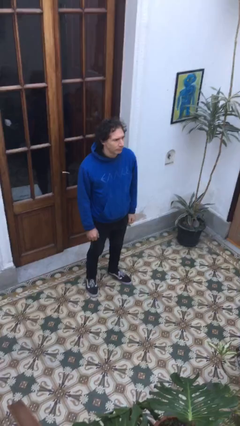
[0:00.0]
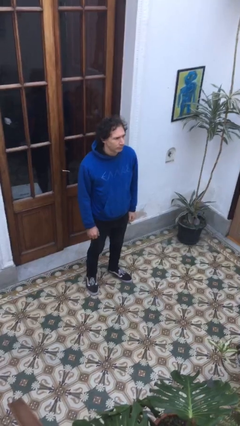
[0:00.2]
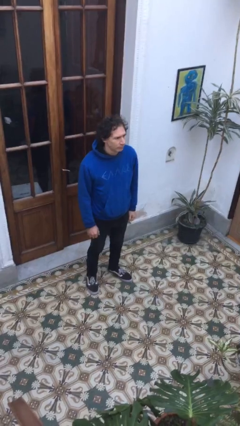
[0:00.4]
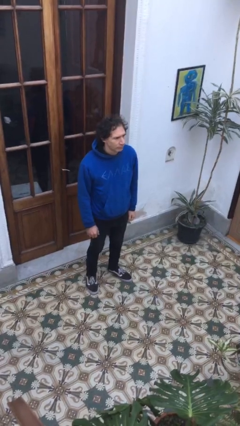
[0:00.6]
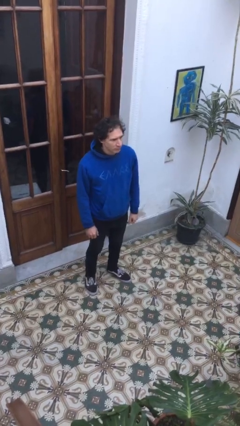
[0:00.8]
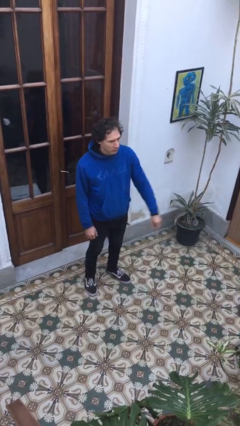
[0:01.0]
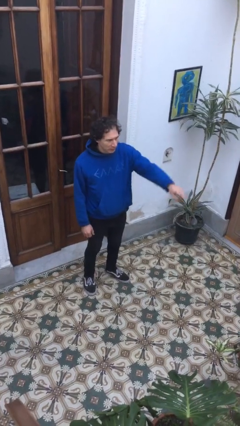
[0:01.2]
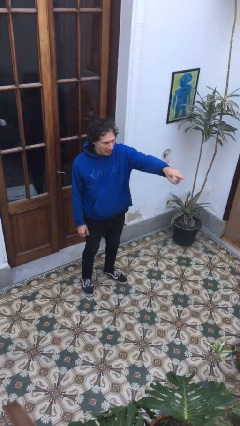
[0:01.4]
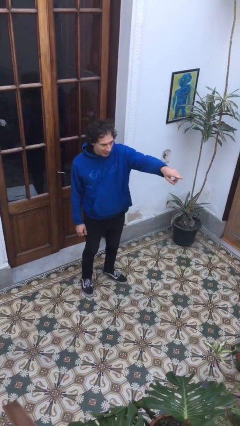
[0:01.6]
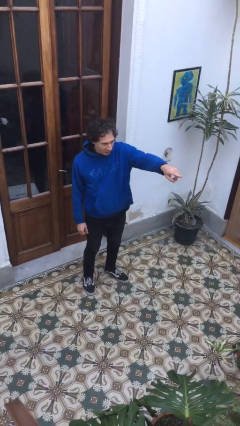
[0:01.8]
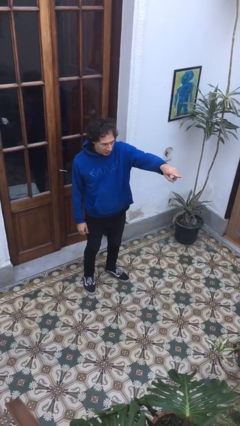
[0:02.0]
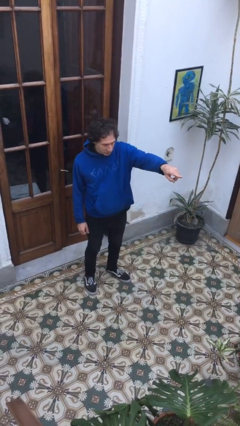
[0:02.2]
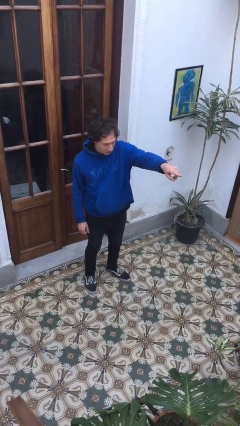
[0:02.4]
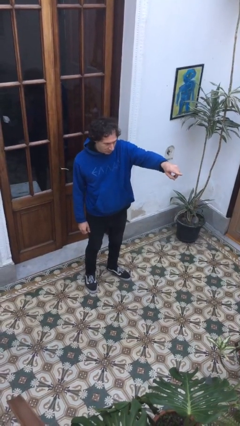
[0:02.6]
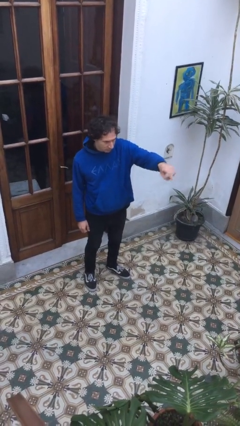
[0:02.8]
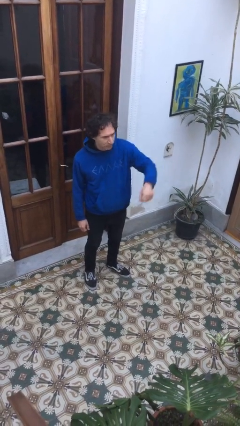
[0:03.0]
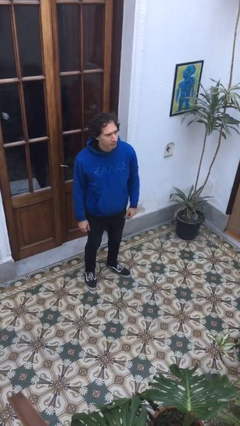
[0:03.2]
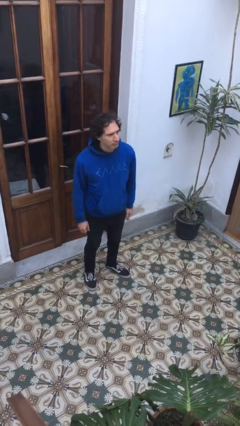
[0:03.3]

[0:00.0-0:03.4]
person points at person

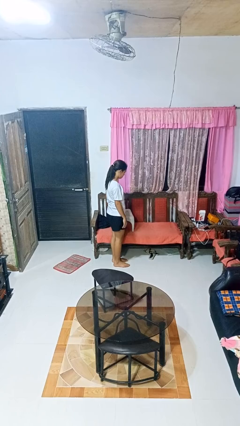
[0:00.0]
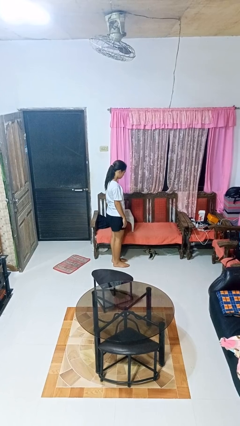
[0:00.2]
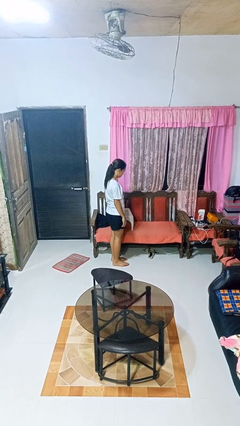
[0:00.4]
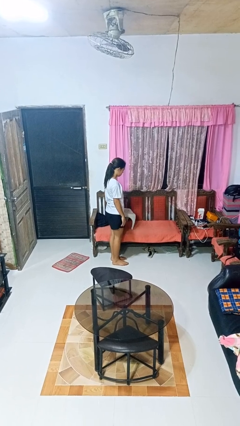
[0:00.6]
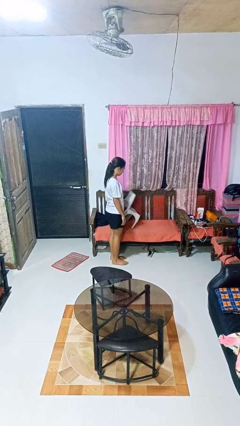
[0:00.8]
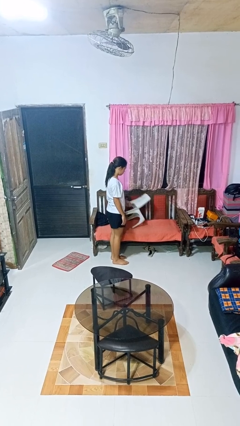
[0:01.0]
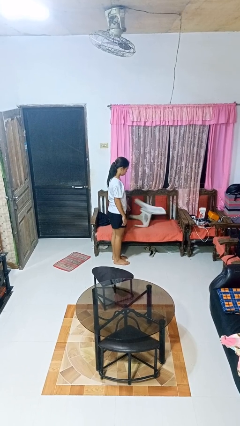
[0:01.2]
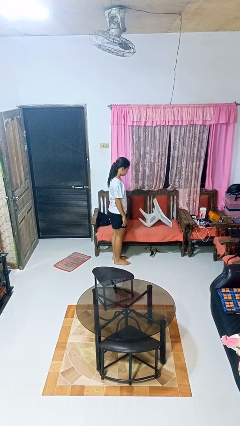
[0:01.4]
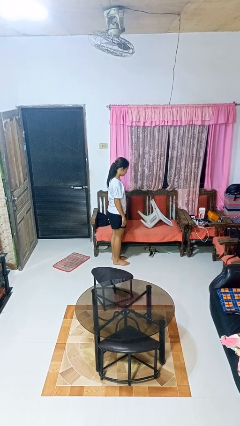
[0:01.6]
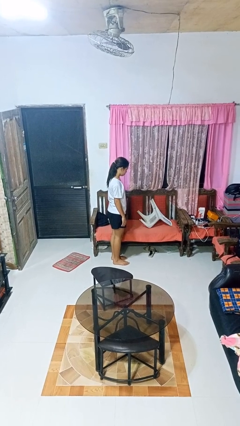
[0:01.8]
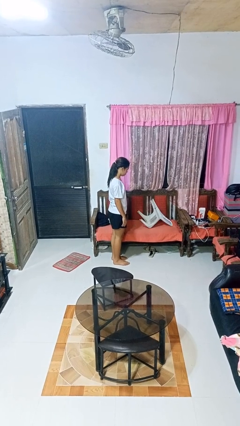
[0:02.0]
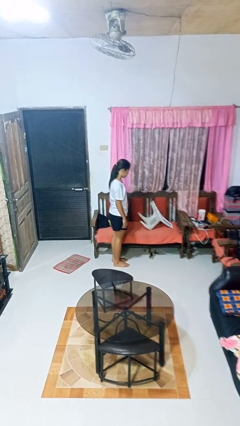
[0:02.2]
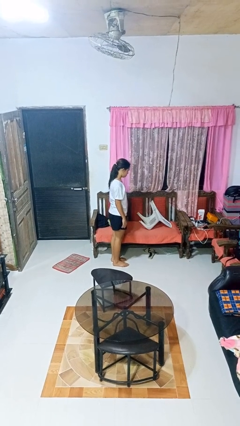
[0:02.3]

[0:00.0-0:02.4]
person knocks over furniture

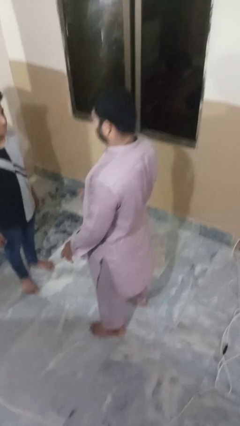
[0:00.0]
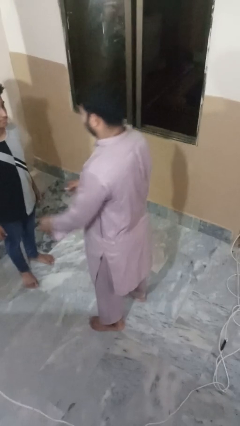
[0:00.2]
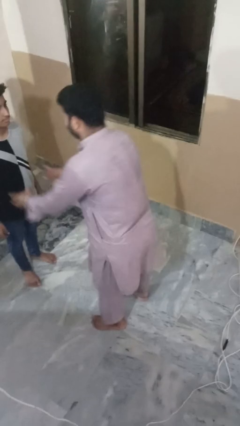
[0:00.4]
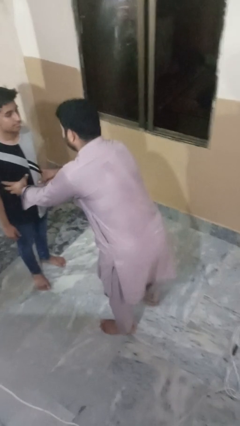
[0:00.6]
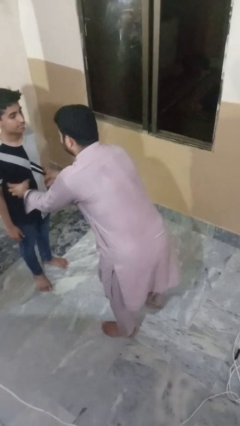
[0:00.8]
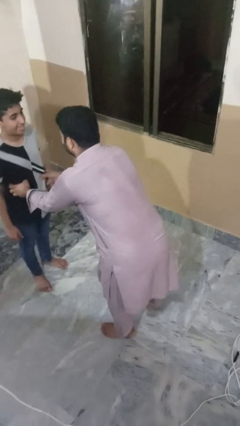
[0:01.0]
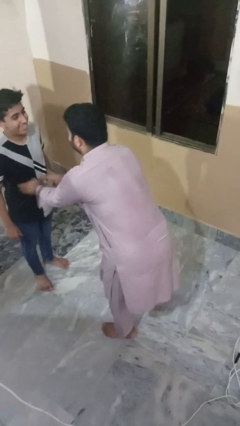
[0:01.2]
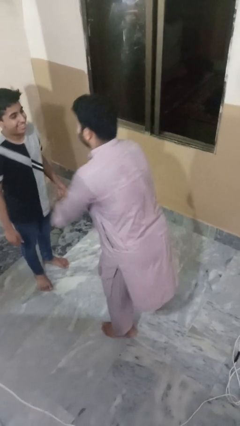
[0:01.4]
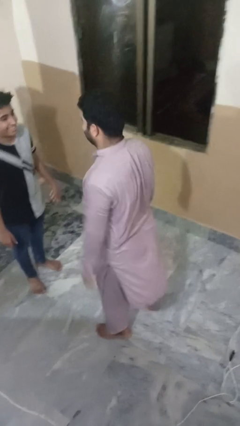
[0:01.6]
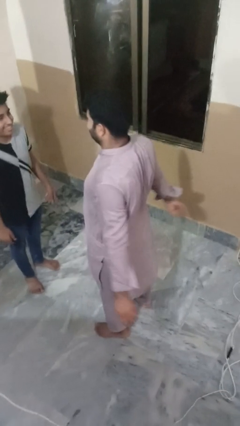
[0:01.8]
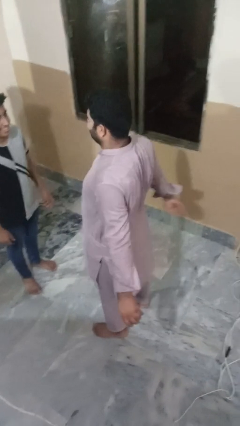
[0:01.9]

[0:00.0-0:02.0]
person tickles person

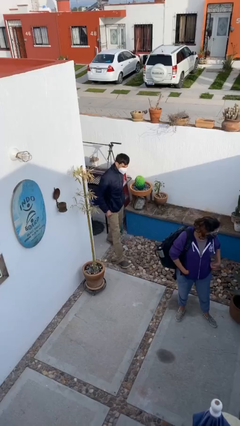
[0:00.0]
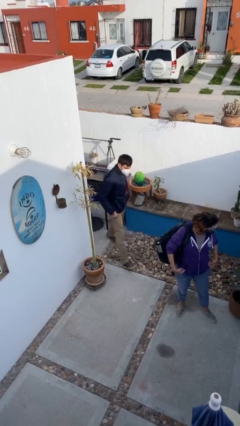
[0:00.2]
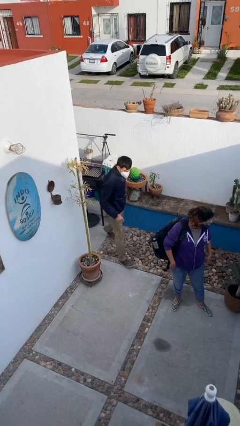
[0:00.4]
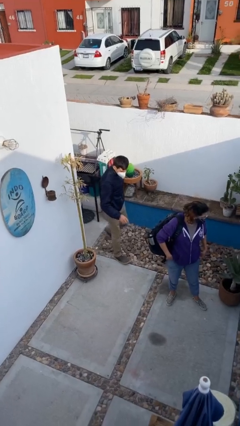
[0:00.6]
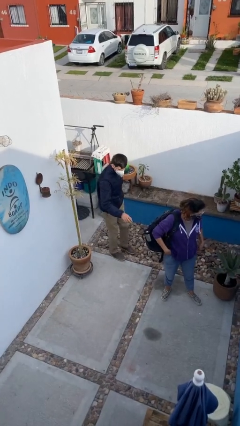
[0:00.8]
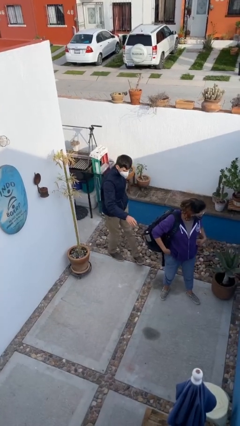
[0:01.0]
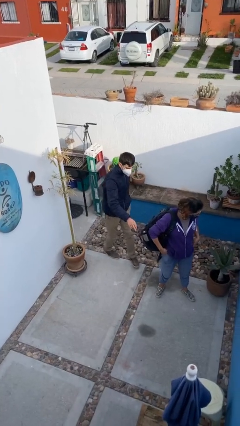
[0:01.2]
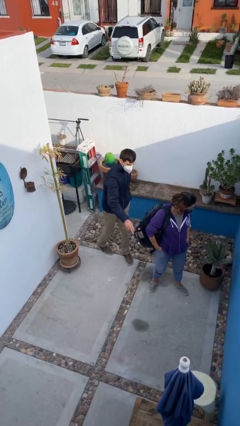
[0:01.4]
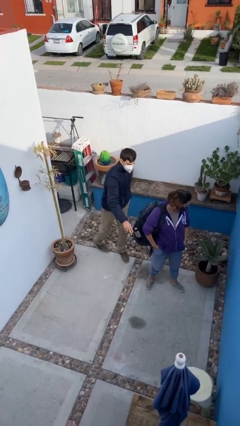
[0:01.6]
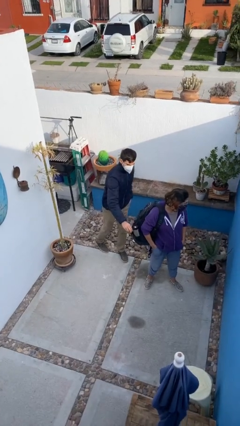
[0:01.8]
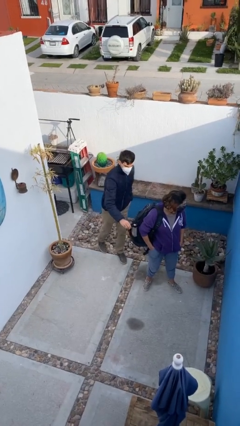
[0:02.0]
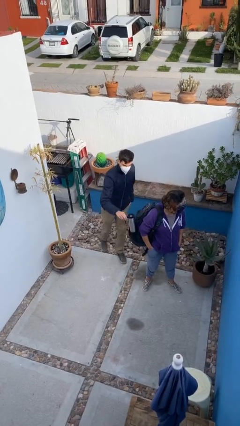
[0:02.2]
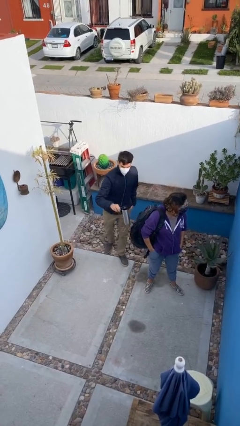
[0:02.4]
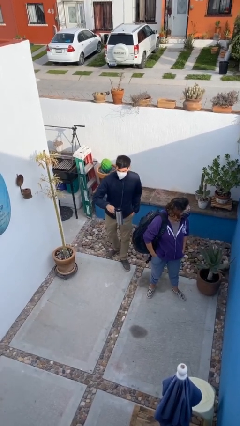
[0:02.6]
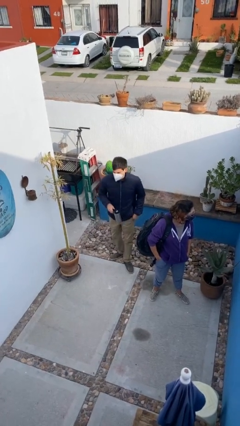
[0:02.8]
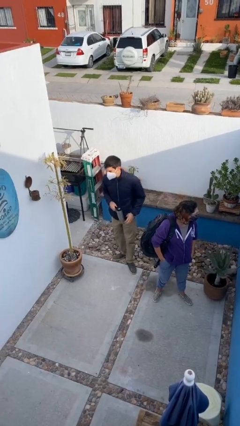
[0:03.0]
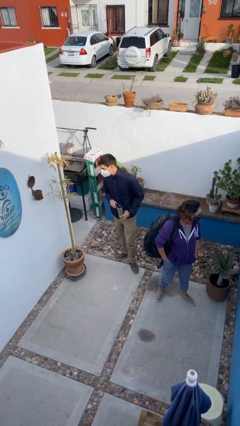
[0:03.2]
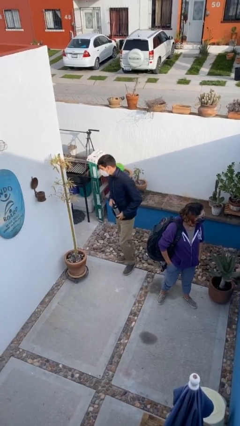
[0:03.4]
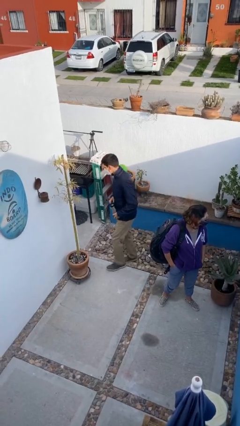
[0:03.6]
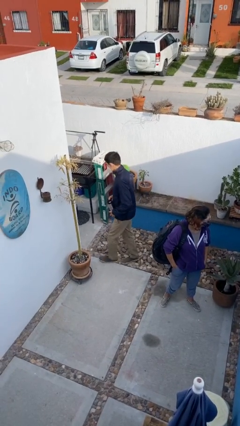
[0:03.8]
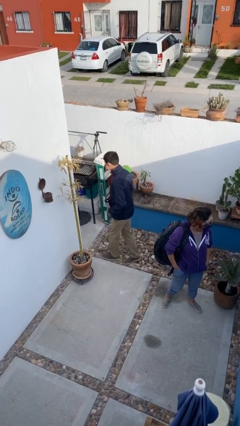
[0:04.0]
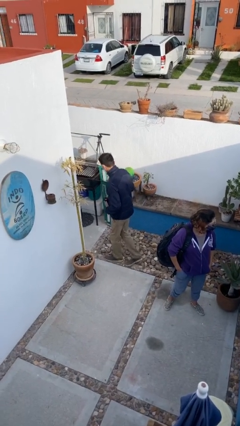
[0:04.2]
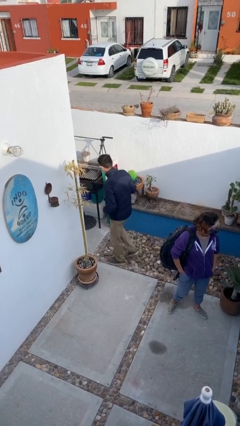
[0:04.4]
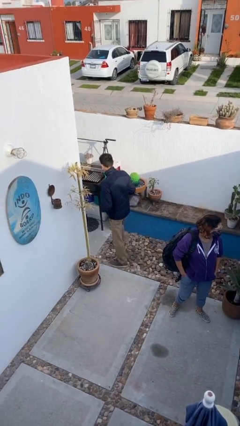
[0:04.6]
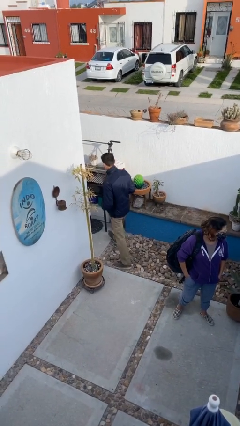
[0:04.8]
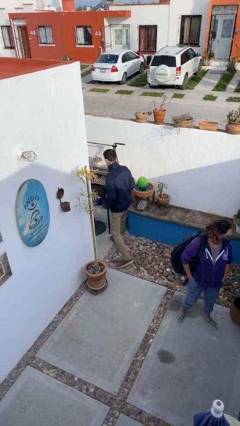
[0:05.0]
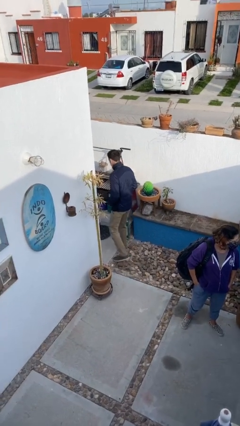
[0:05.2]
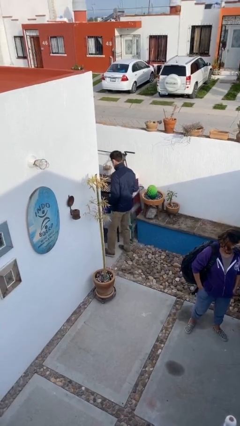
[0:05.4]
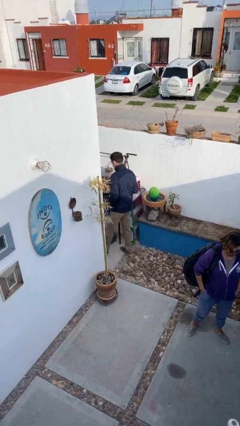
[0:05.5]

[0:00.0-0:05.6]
person steals object from person

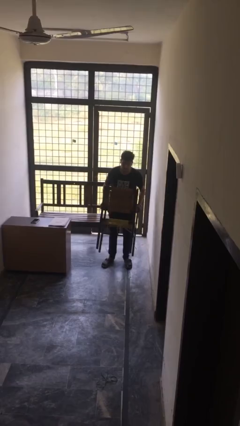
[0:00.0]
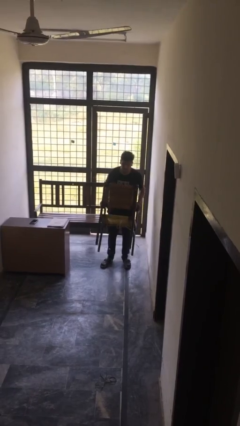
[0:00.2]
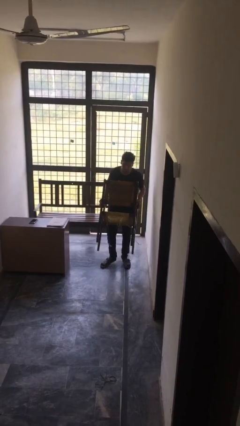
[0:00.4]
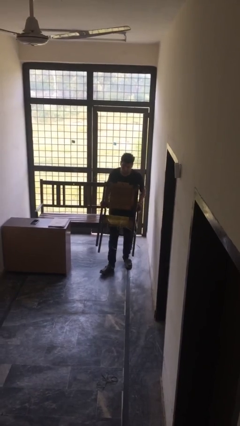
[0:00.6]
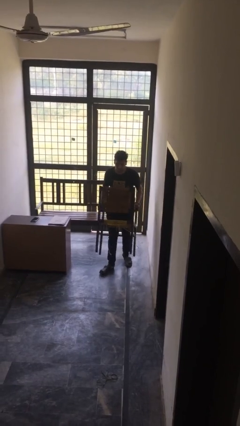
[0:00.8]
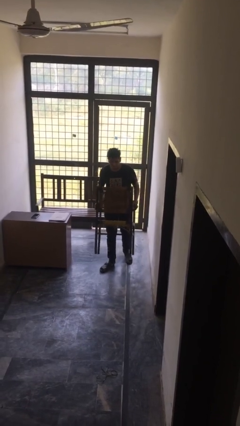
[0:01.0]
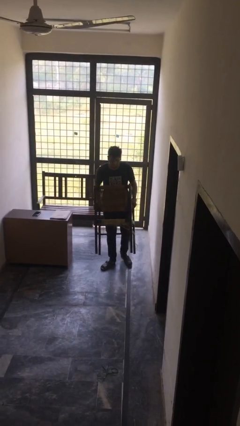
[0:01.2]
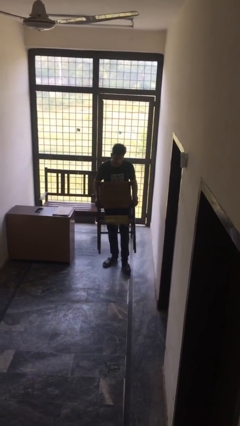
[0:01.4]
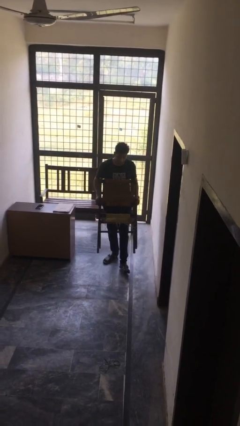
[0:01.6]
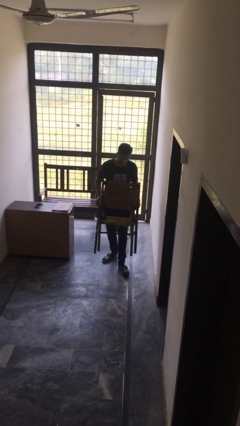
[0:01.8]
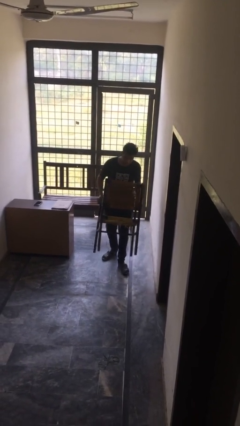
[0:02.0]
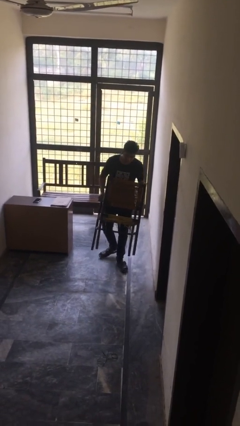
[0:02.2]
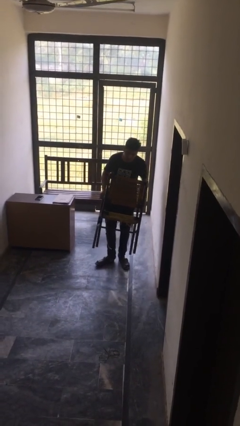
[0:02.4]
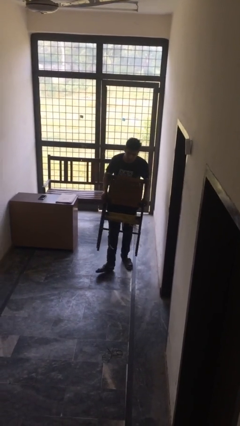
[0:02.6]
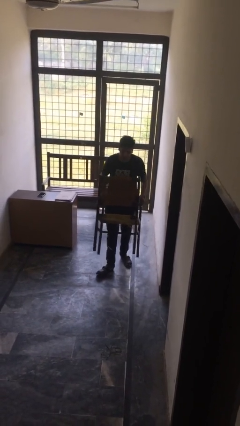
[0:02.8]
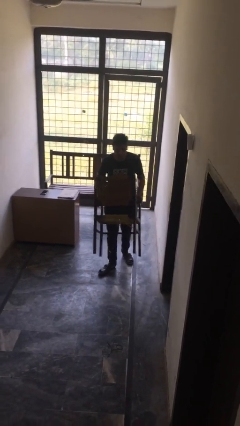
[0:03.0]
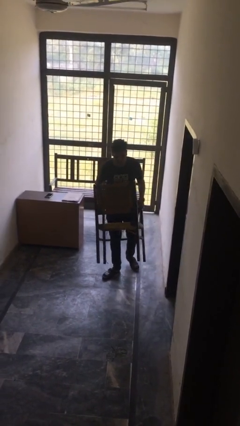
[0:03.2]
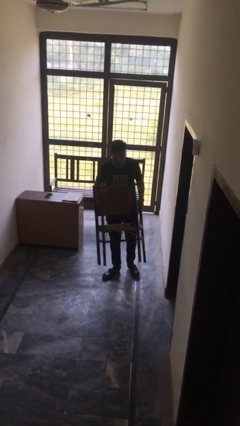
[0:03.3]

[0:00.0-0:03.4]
person carries heavy object

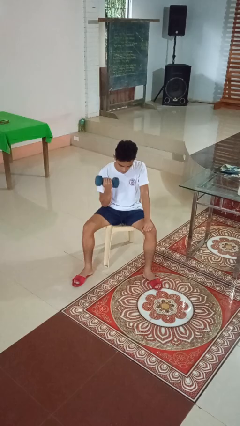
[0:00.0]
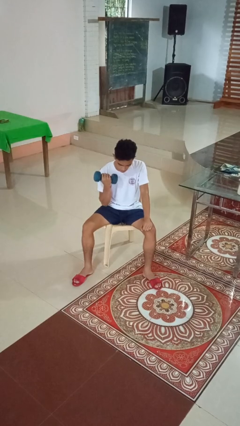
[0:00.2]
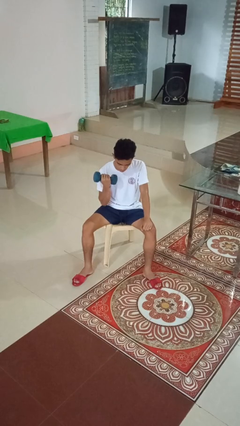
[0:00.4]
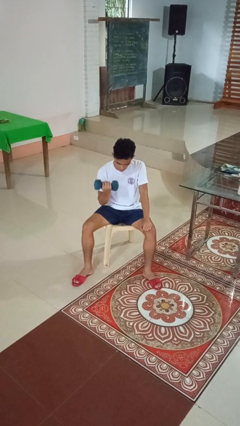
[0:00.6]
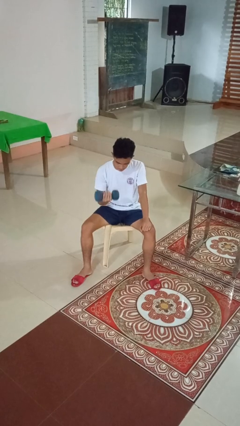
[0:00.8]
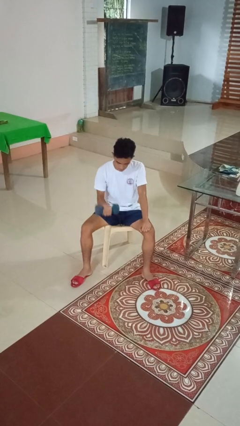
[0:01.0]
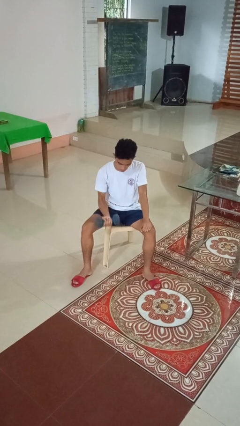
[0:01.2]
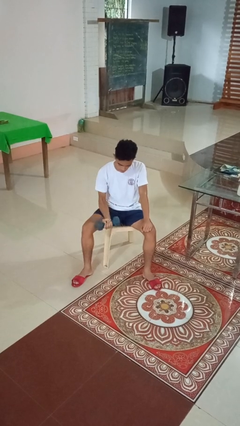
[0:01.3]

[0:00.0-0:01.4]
person lifts dumbbells
